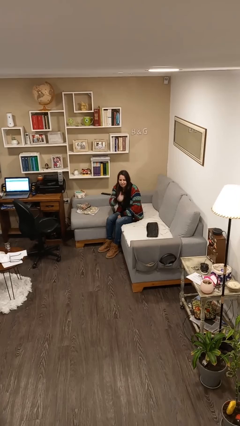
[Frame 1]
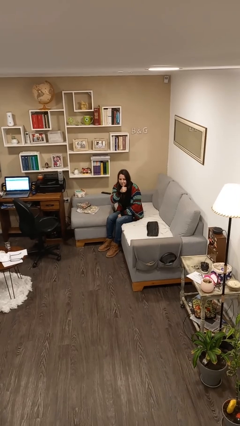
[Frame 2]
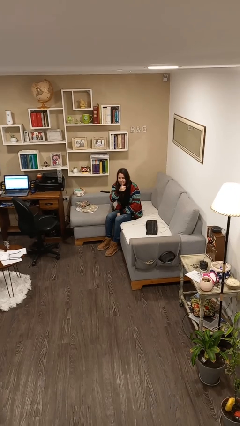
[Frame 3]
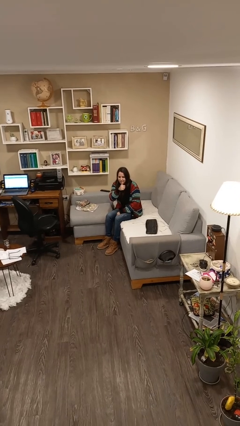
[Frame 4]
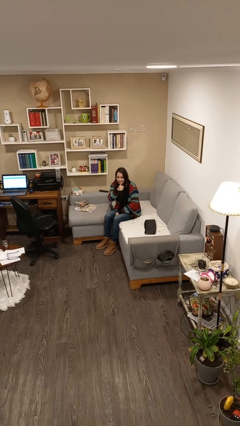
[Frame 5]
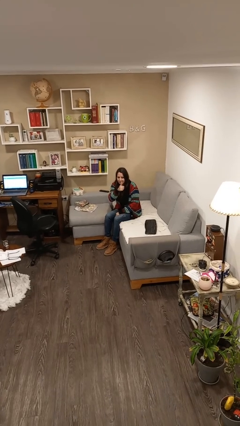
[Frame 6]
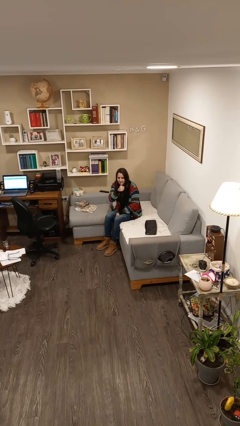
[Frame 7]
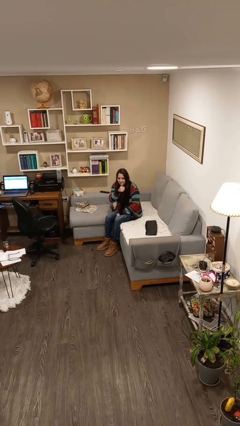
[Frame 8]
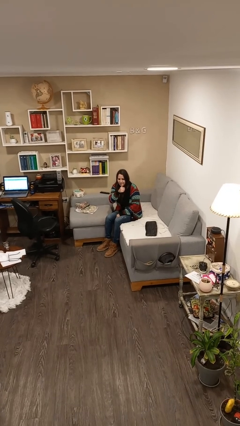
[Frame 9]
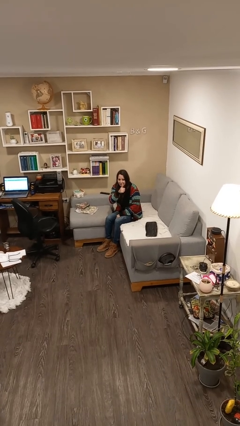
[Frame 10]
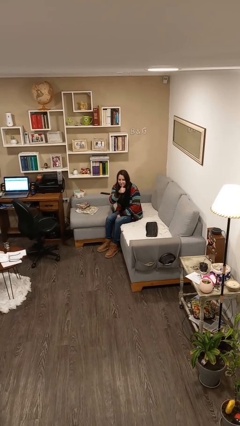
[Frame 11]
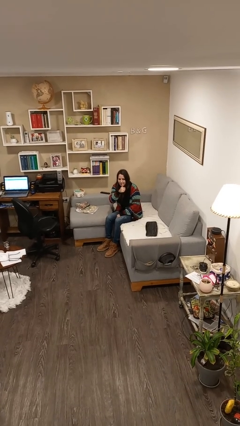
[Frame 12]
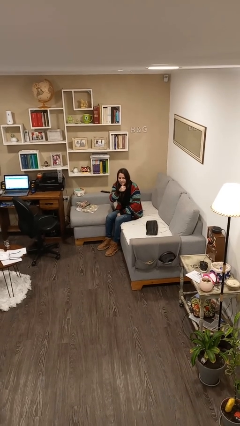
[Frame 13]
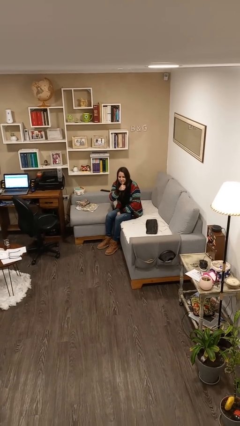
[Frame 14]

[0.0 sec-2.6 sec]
person gestures thumbs up

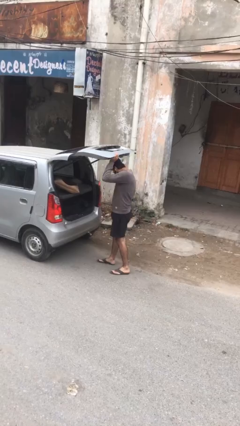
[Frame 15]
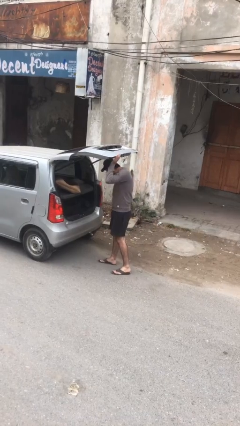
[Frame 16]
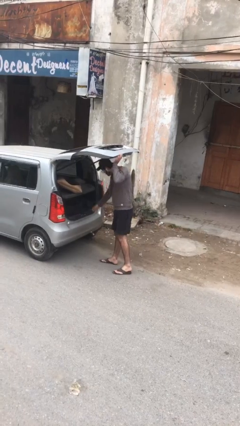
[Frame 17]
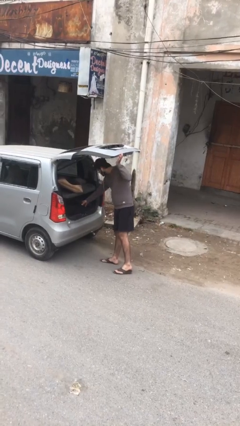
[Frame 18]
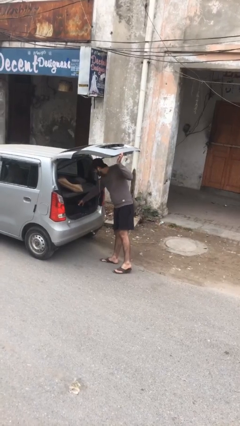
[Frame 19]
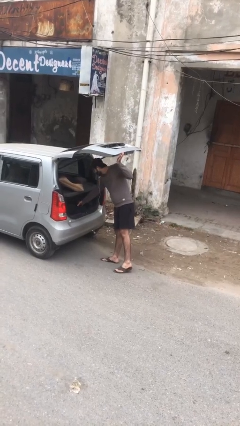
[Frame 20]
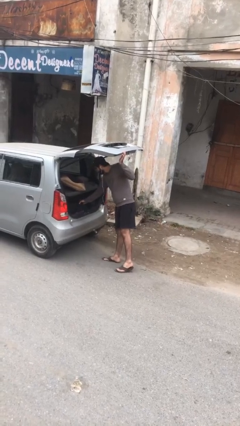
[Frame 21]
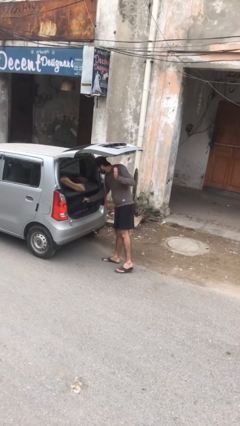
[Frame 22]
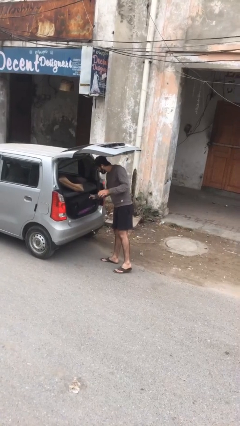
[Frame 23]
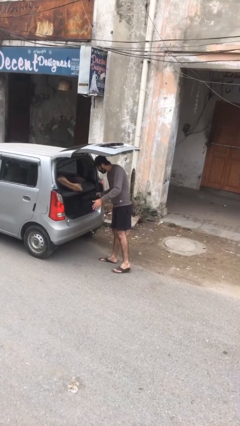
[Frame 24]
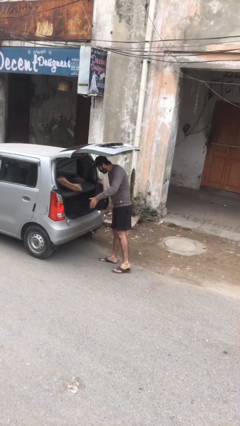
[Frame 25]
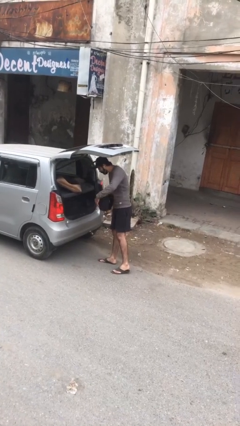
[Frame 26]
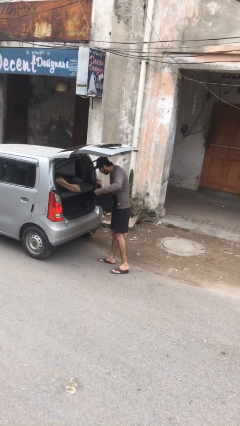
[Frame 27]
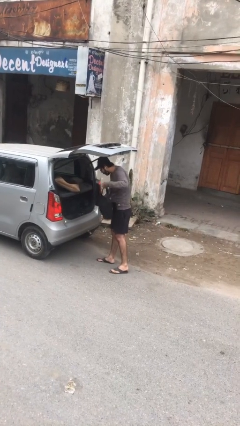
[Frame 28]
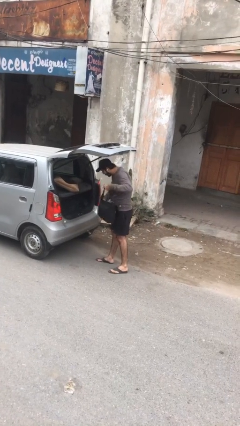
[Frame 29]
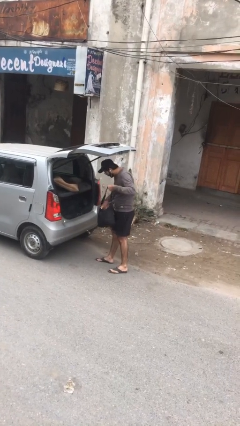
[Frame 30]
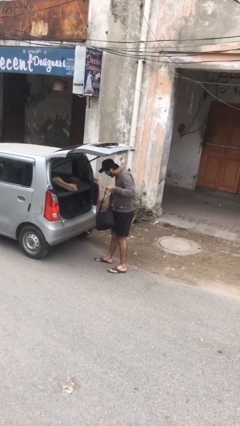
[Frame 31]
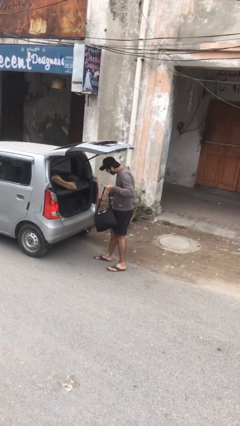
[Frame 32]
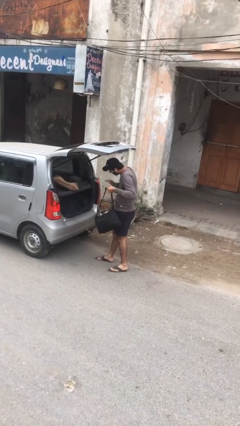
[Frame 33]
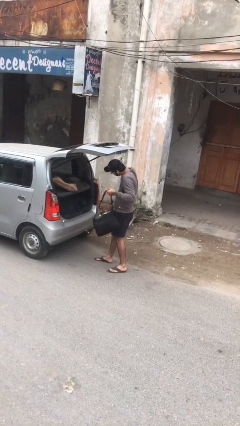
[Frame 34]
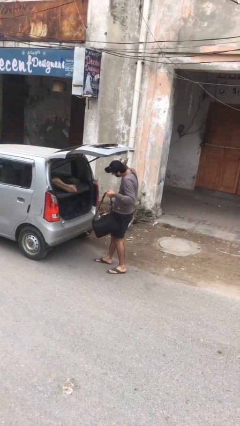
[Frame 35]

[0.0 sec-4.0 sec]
person unloads car

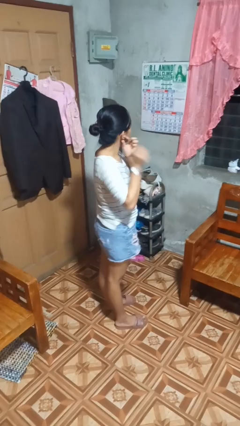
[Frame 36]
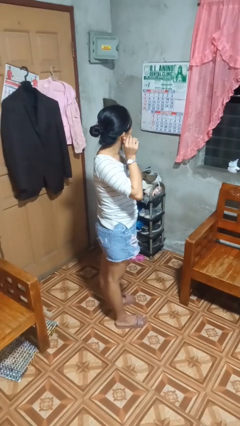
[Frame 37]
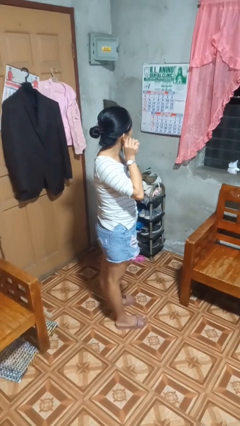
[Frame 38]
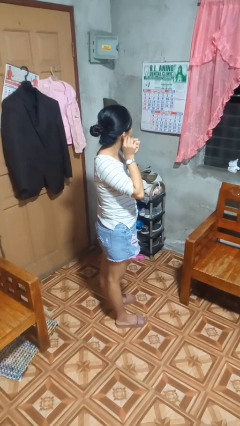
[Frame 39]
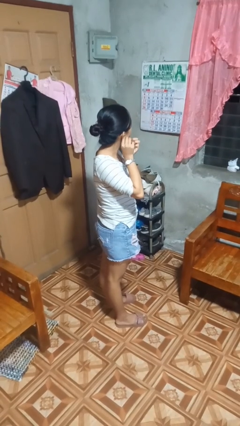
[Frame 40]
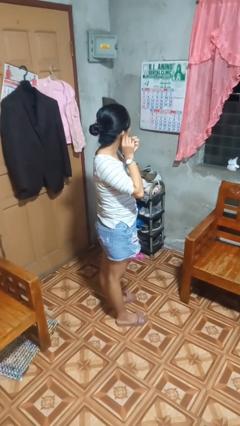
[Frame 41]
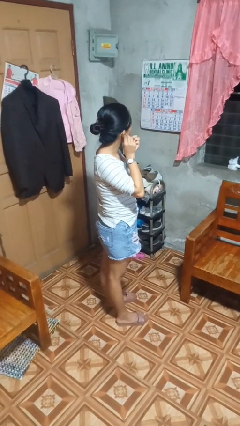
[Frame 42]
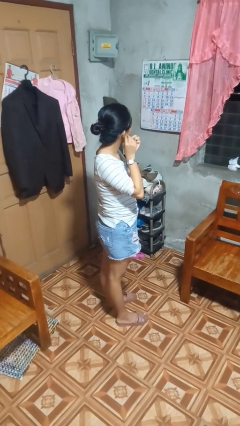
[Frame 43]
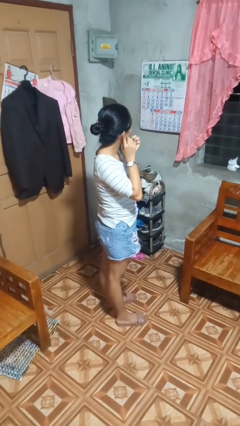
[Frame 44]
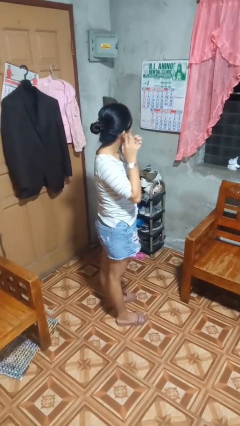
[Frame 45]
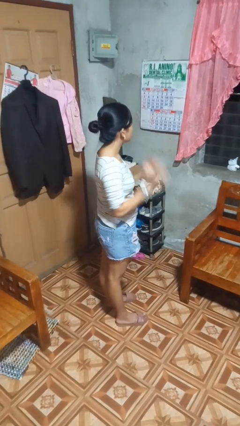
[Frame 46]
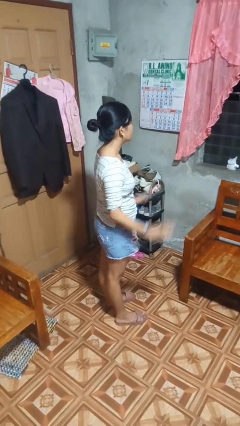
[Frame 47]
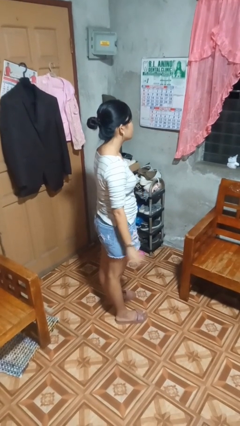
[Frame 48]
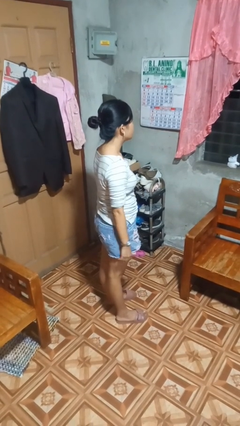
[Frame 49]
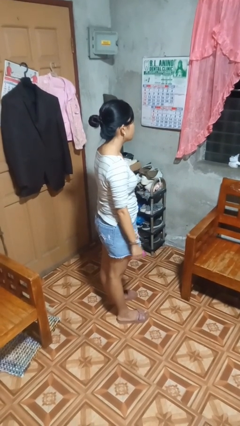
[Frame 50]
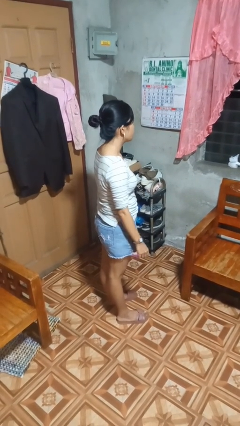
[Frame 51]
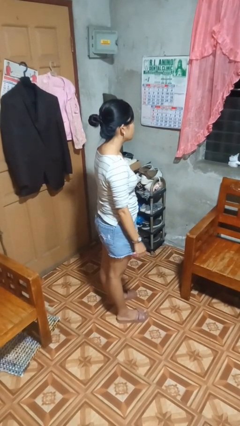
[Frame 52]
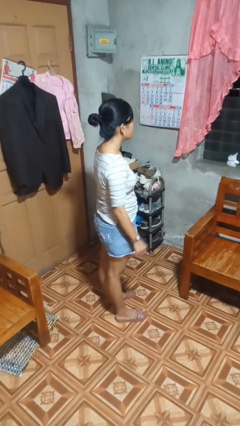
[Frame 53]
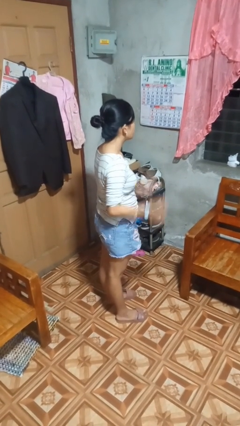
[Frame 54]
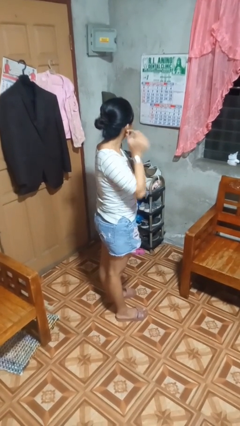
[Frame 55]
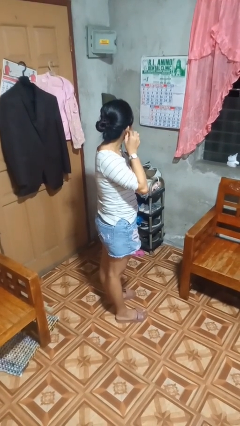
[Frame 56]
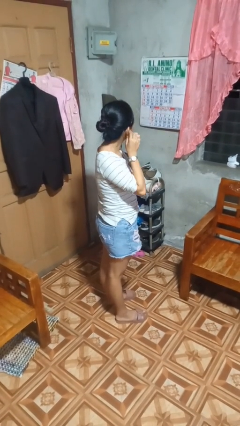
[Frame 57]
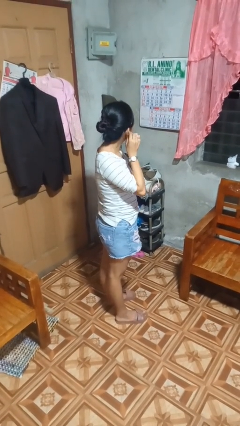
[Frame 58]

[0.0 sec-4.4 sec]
person puts on earrings

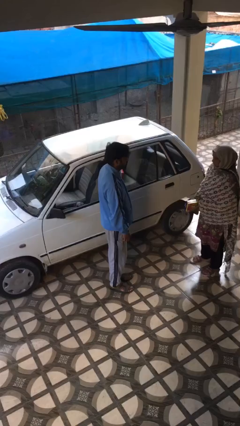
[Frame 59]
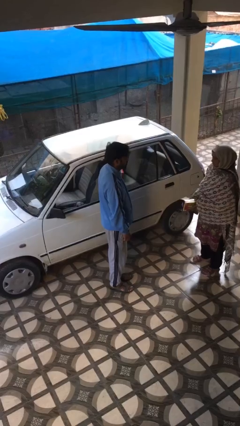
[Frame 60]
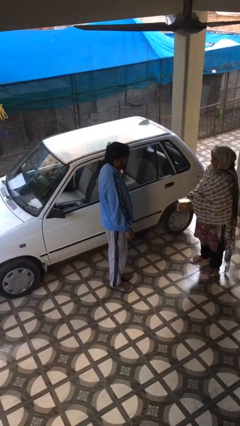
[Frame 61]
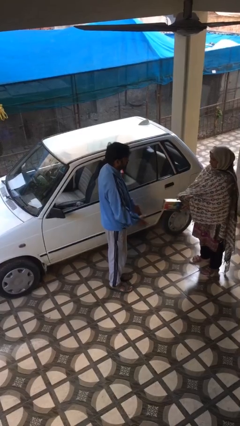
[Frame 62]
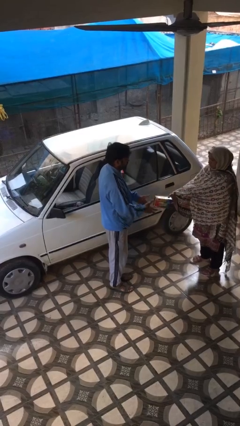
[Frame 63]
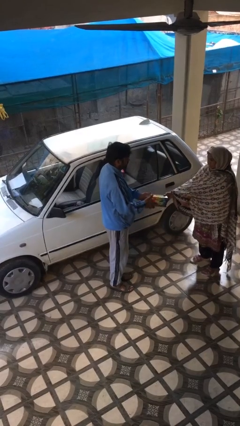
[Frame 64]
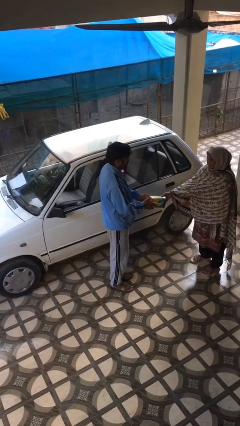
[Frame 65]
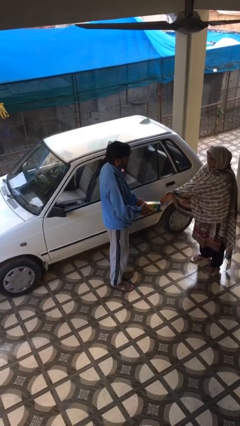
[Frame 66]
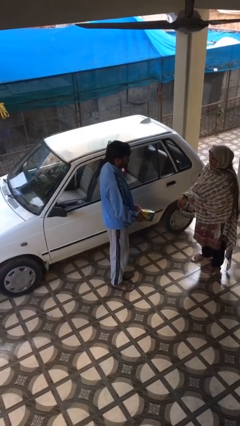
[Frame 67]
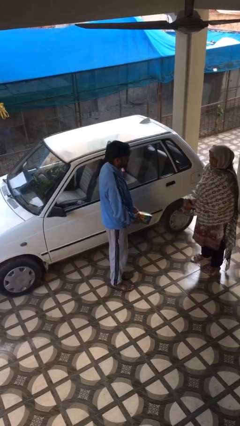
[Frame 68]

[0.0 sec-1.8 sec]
person transfers object to person

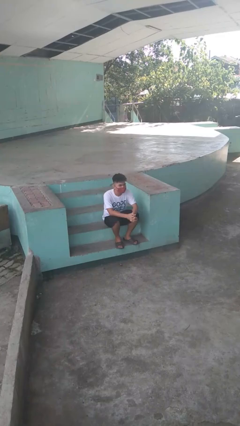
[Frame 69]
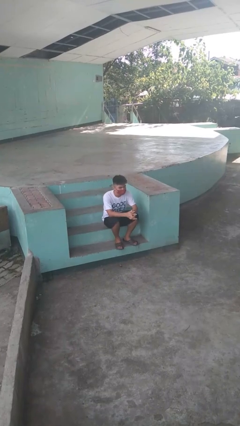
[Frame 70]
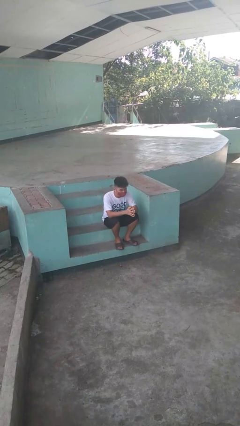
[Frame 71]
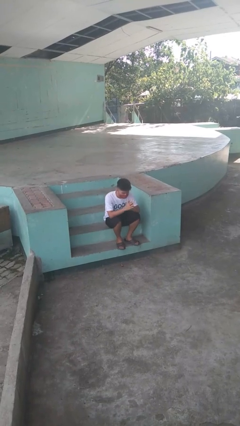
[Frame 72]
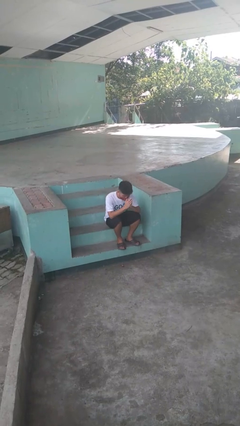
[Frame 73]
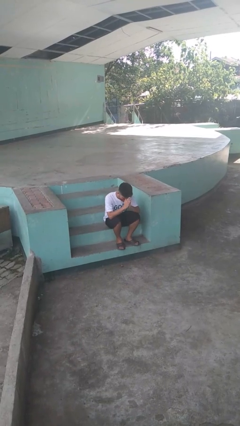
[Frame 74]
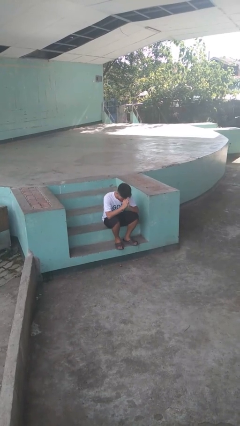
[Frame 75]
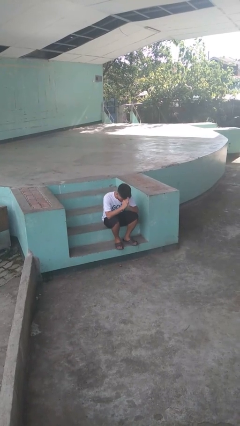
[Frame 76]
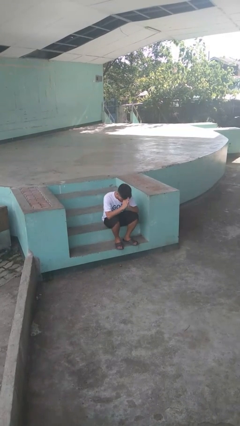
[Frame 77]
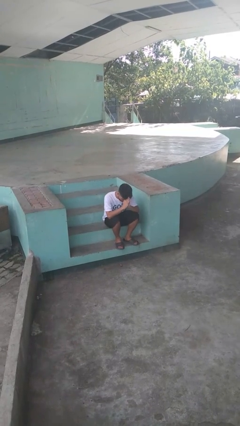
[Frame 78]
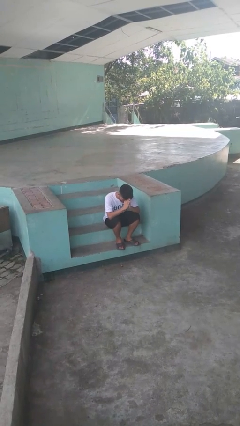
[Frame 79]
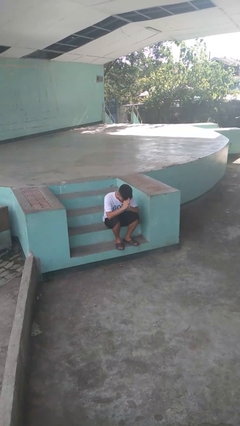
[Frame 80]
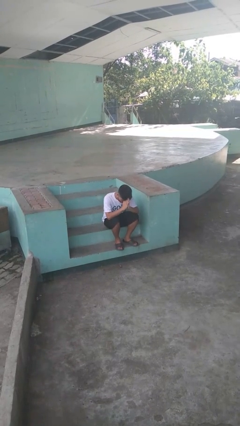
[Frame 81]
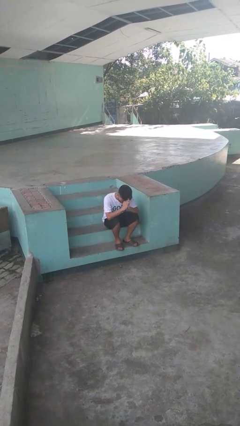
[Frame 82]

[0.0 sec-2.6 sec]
person prays

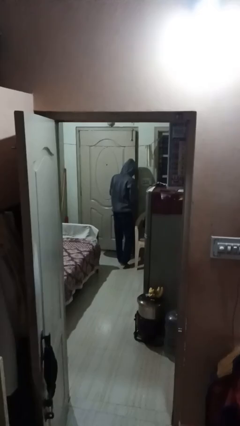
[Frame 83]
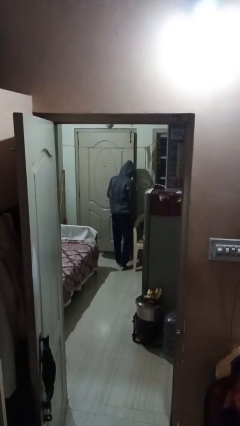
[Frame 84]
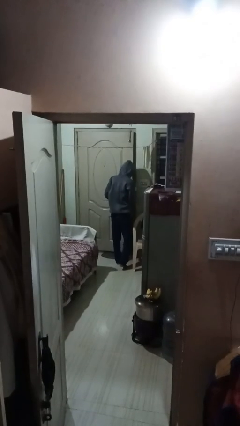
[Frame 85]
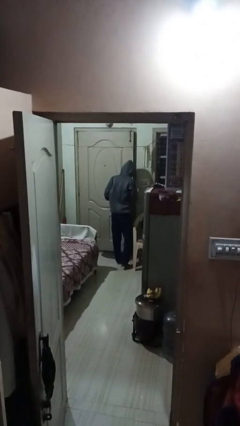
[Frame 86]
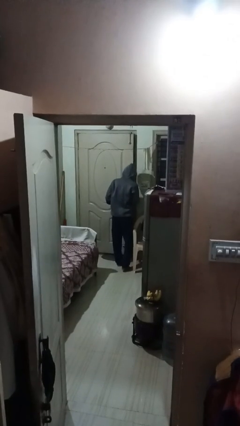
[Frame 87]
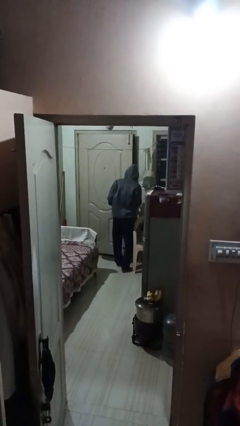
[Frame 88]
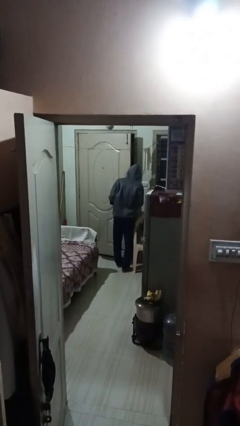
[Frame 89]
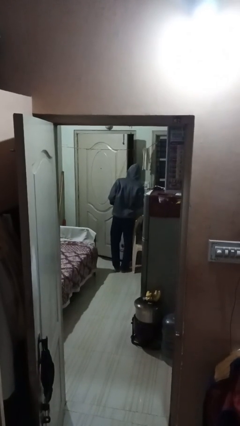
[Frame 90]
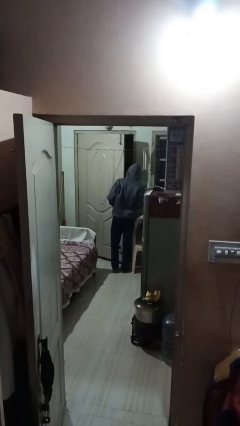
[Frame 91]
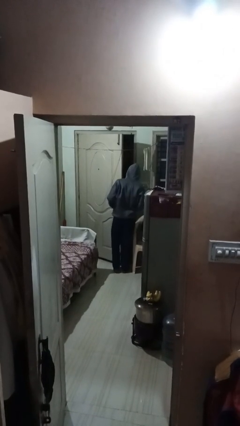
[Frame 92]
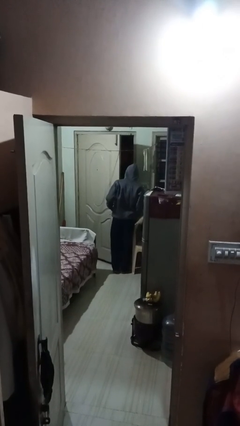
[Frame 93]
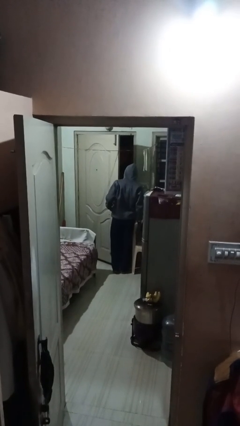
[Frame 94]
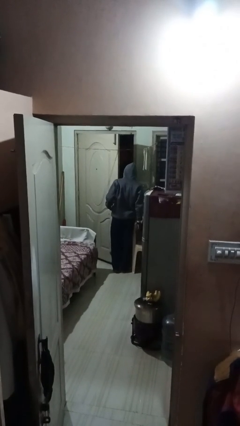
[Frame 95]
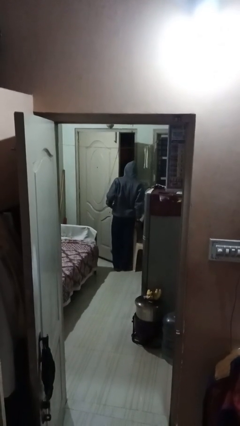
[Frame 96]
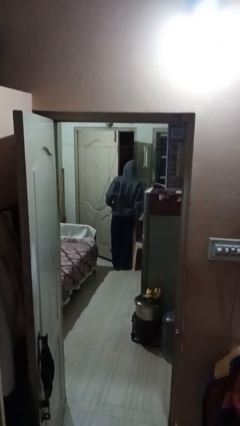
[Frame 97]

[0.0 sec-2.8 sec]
person opens facility door
